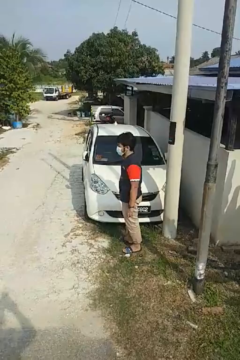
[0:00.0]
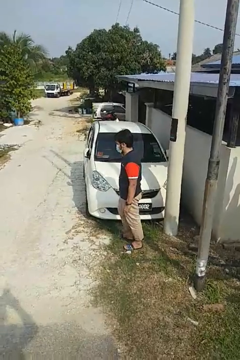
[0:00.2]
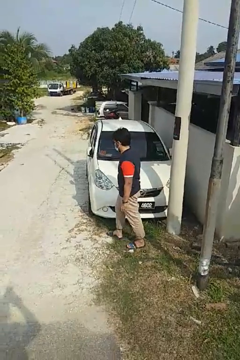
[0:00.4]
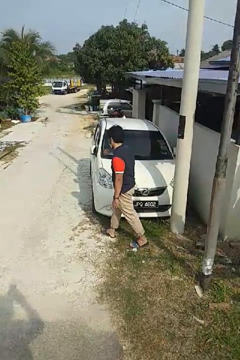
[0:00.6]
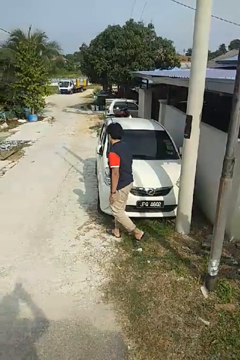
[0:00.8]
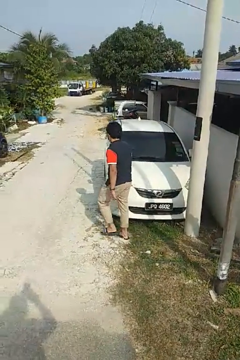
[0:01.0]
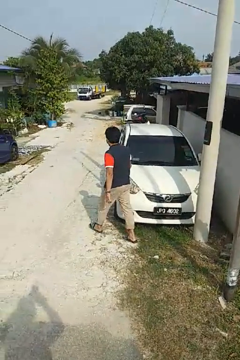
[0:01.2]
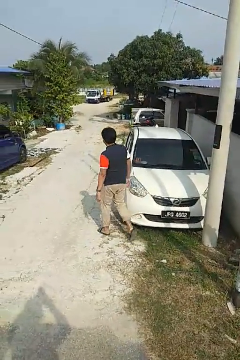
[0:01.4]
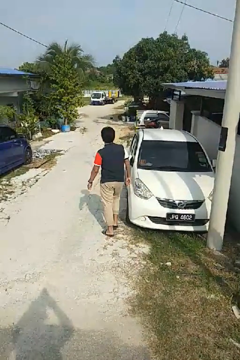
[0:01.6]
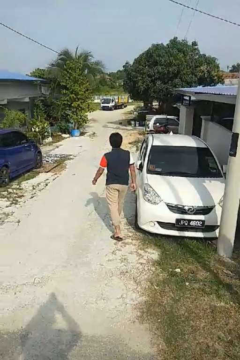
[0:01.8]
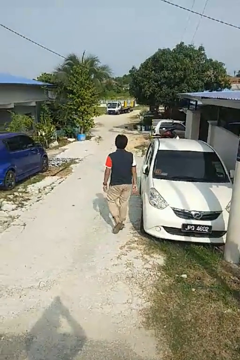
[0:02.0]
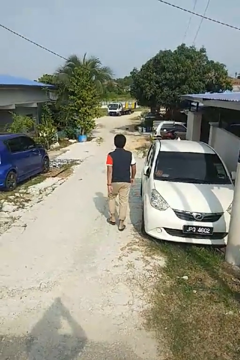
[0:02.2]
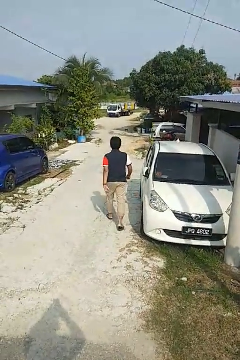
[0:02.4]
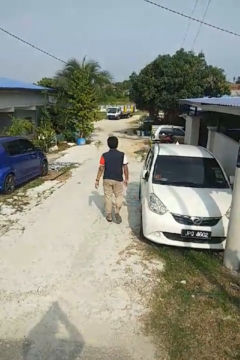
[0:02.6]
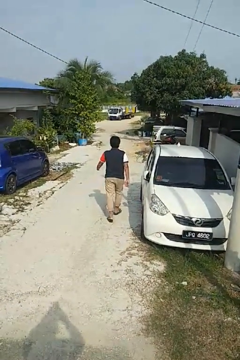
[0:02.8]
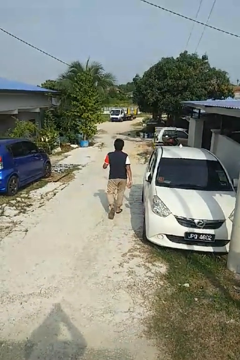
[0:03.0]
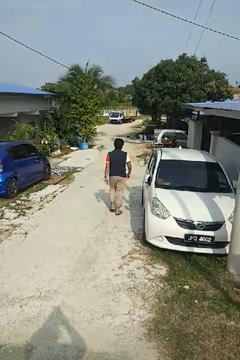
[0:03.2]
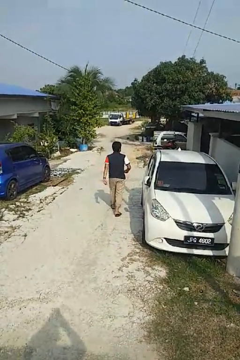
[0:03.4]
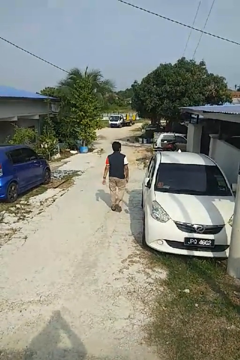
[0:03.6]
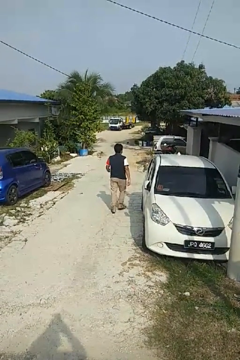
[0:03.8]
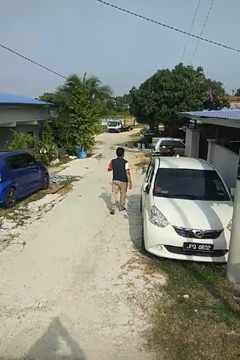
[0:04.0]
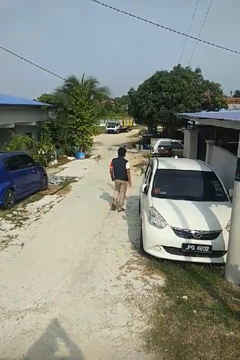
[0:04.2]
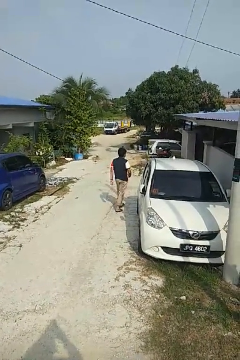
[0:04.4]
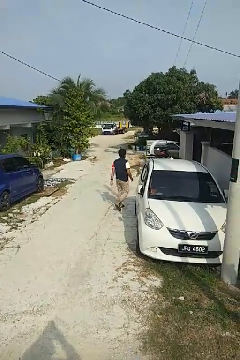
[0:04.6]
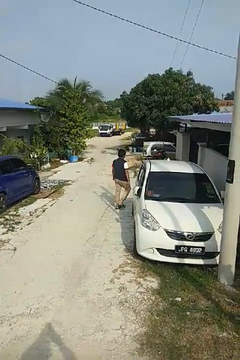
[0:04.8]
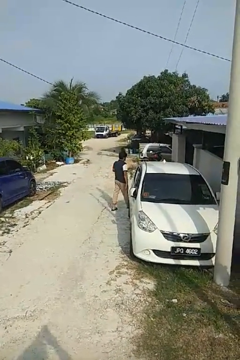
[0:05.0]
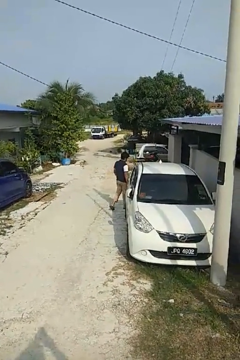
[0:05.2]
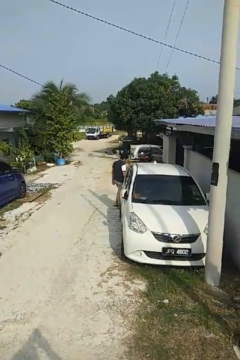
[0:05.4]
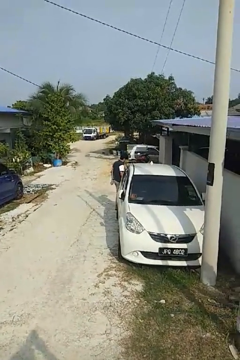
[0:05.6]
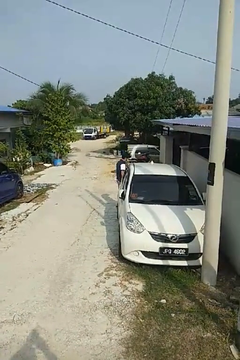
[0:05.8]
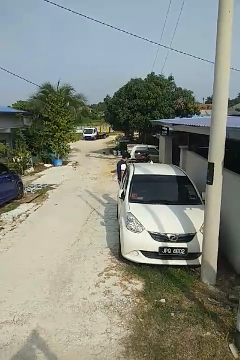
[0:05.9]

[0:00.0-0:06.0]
person walks around car

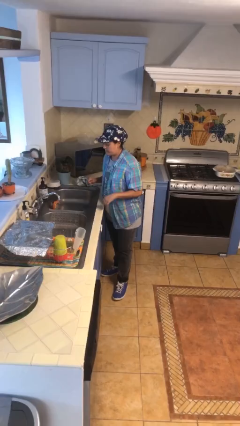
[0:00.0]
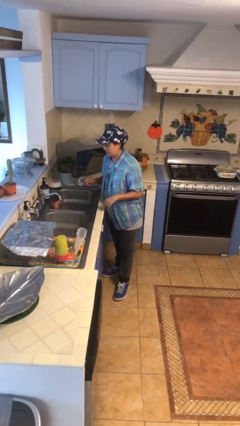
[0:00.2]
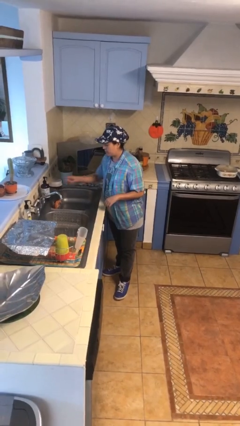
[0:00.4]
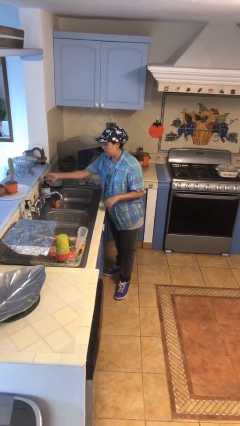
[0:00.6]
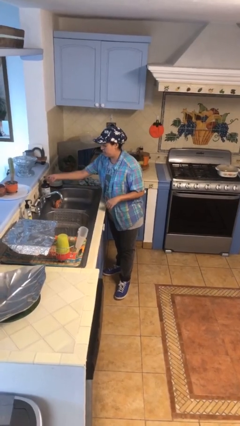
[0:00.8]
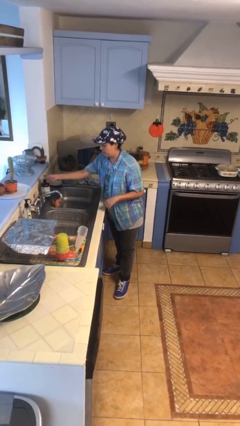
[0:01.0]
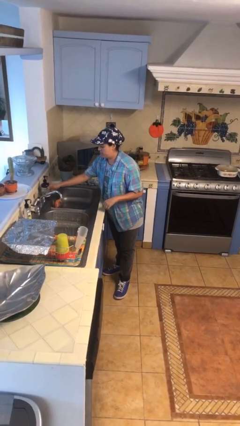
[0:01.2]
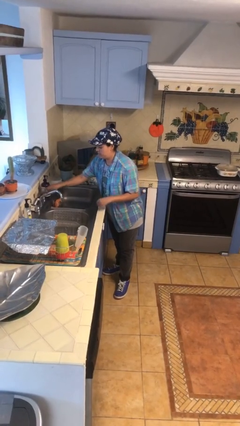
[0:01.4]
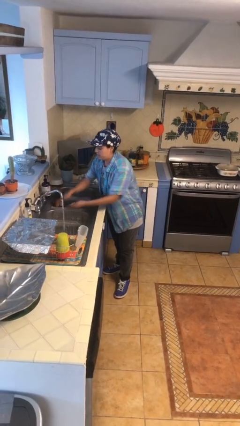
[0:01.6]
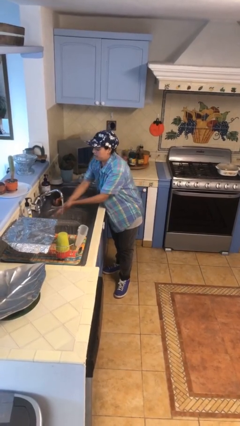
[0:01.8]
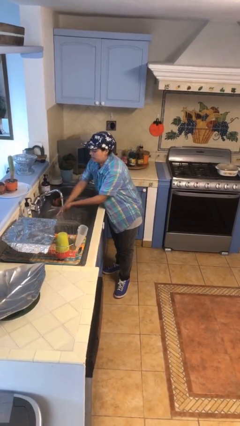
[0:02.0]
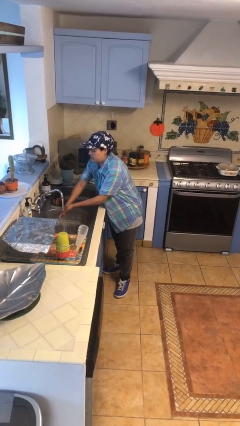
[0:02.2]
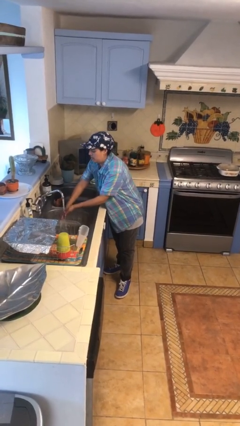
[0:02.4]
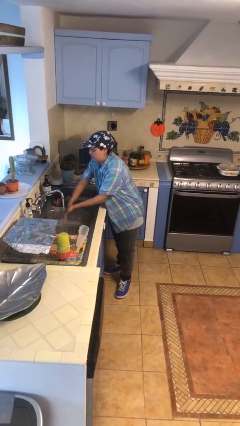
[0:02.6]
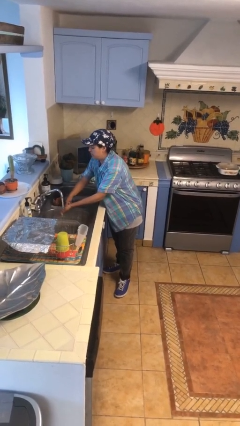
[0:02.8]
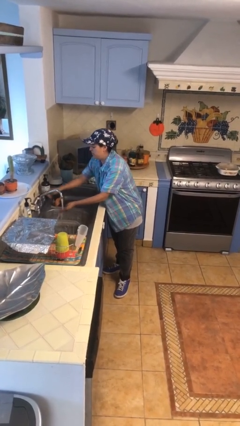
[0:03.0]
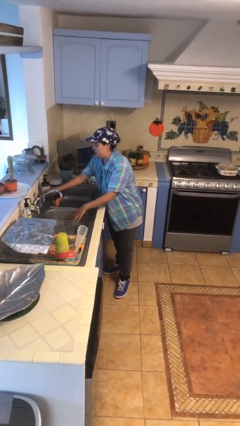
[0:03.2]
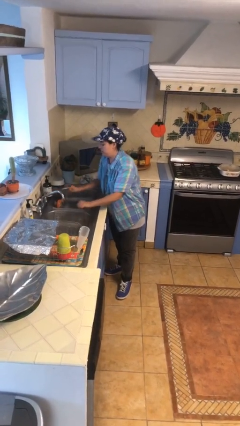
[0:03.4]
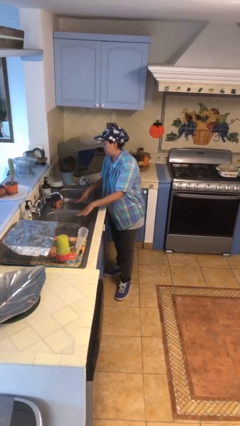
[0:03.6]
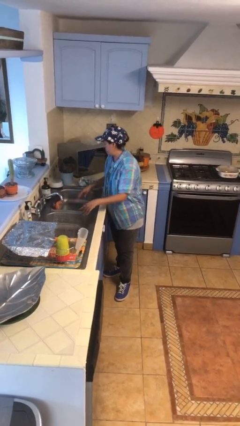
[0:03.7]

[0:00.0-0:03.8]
person washes hands

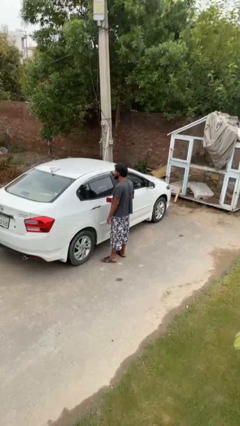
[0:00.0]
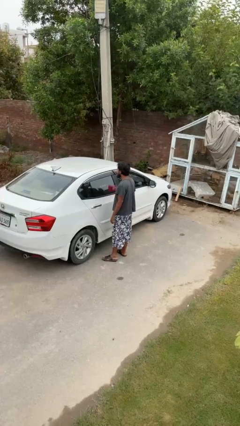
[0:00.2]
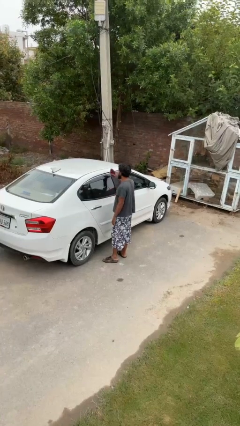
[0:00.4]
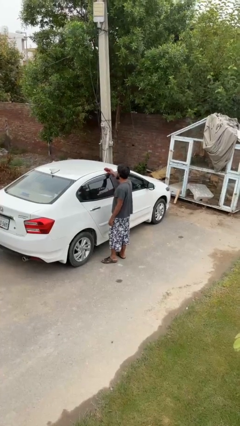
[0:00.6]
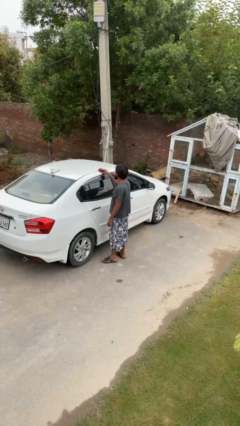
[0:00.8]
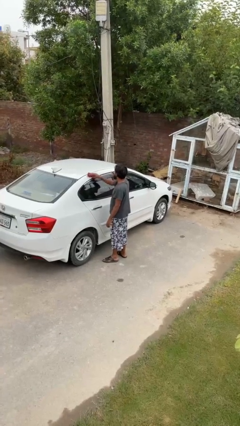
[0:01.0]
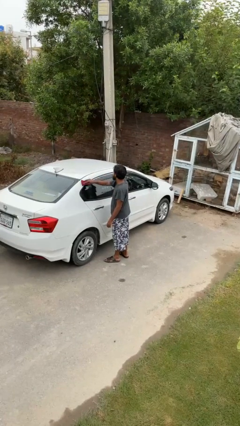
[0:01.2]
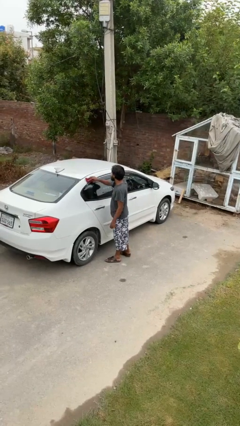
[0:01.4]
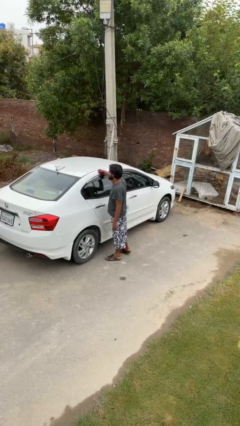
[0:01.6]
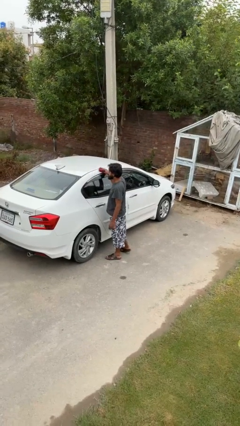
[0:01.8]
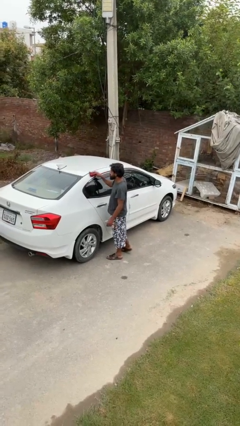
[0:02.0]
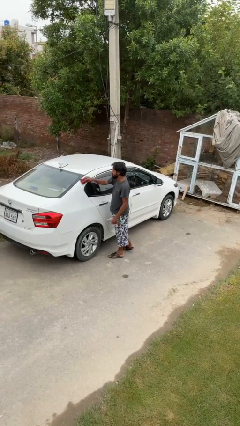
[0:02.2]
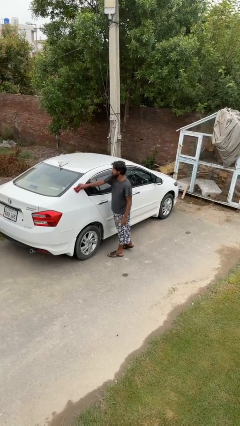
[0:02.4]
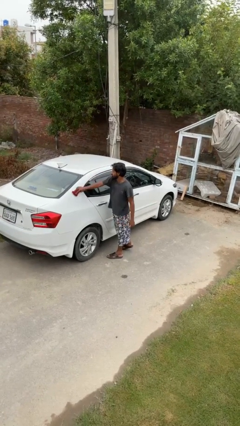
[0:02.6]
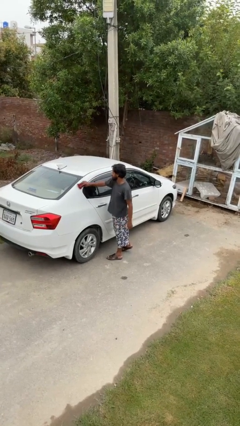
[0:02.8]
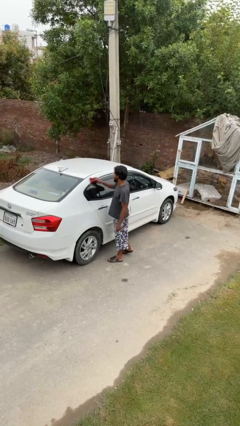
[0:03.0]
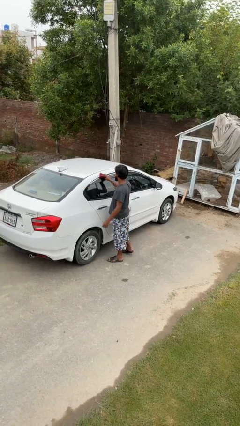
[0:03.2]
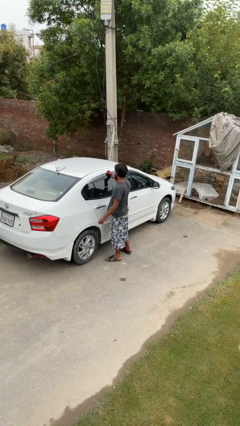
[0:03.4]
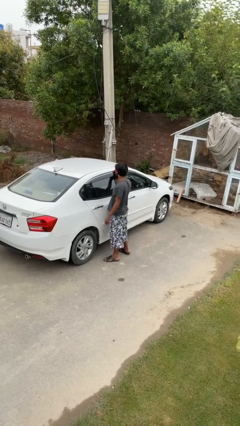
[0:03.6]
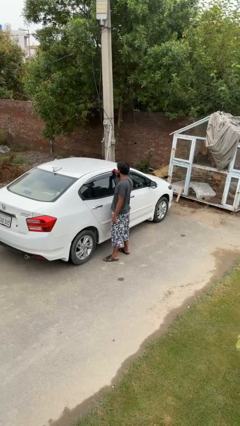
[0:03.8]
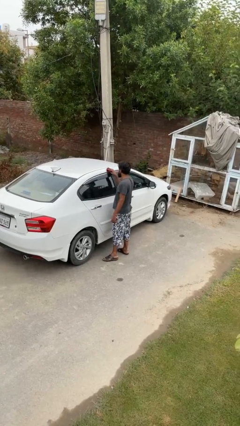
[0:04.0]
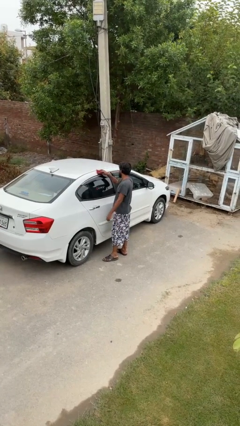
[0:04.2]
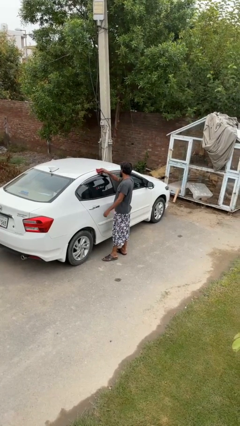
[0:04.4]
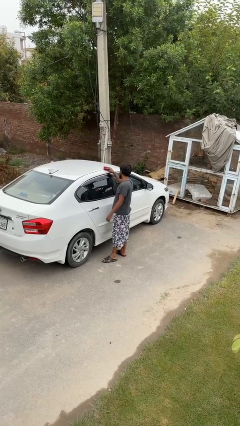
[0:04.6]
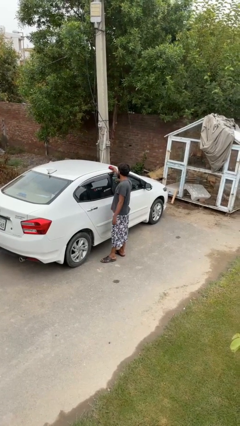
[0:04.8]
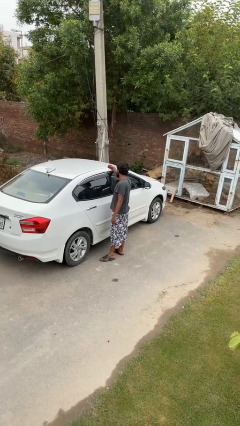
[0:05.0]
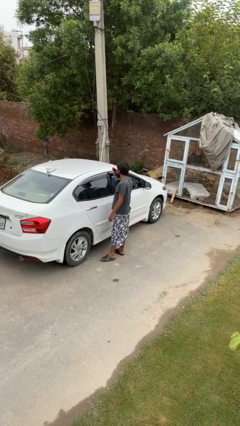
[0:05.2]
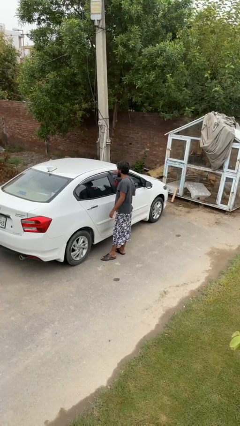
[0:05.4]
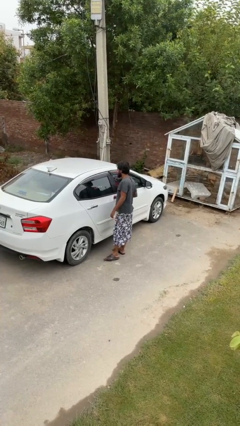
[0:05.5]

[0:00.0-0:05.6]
person polishes car with rag

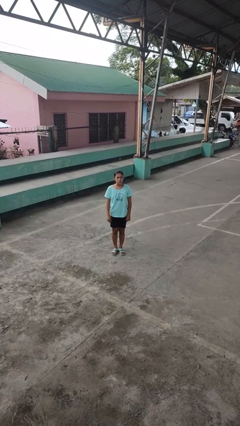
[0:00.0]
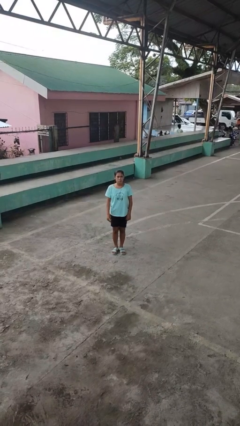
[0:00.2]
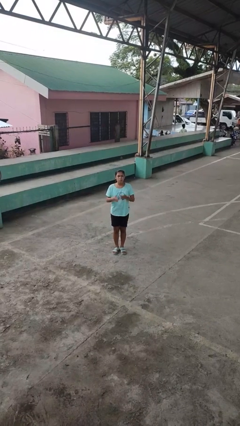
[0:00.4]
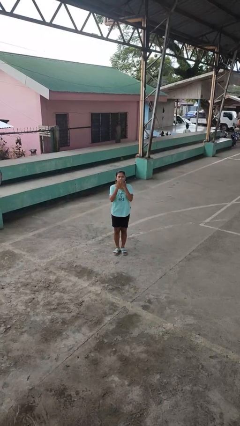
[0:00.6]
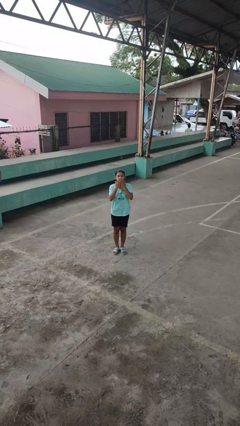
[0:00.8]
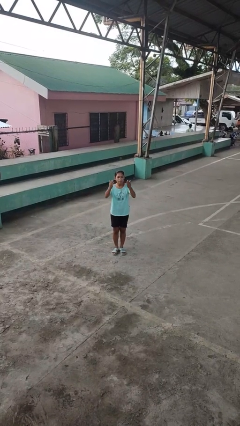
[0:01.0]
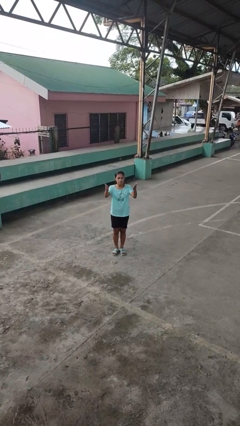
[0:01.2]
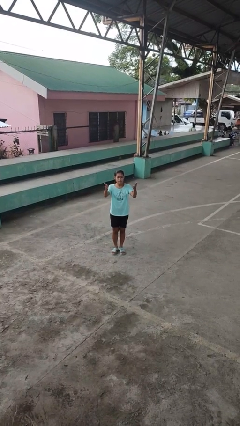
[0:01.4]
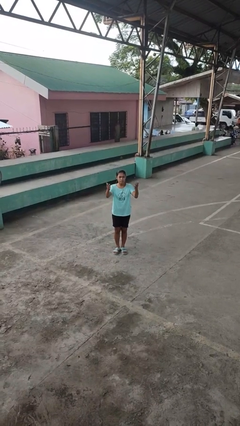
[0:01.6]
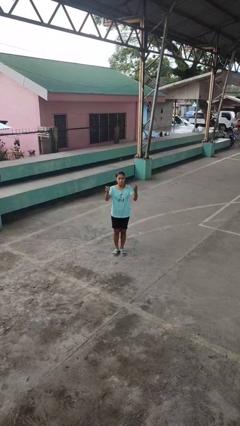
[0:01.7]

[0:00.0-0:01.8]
person gestures blow kiss

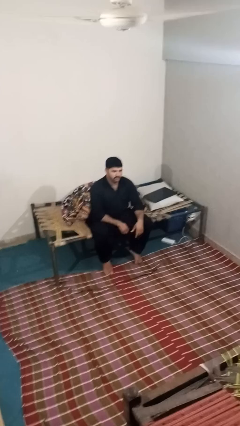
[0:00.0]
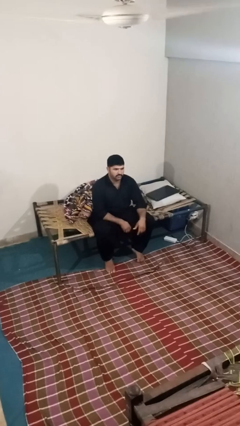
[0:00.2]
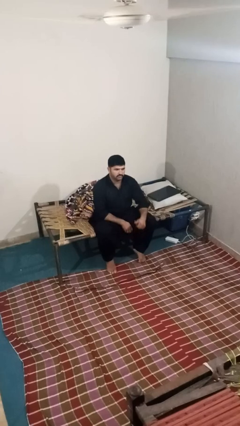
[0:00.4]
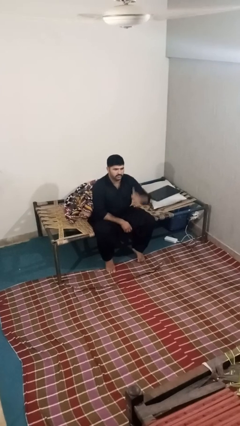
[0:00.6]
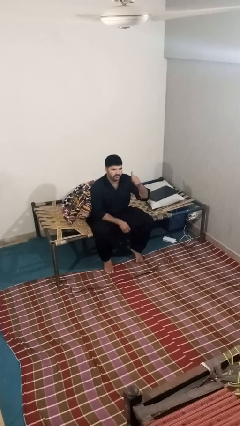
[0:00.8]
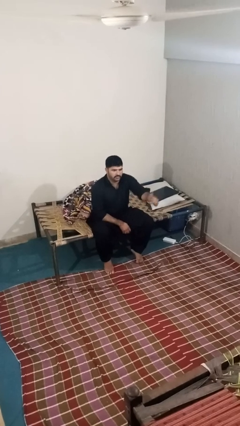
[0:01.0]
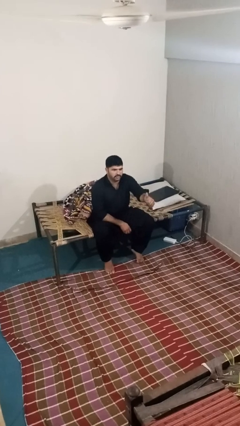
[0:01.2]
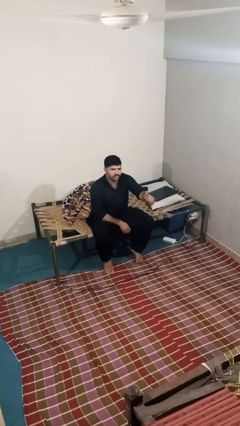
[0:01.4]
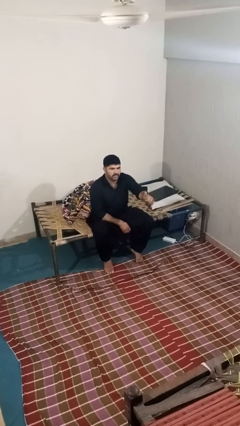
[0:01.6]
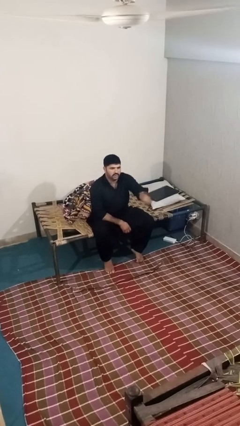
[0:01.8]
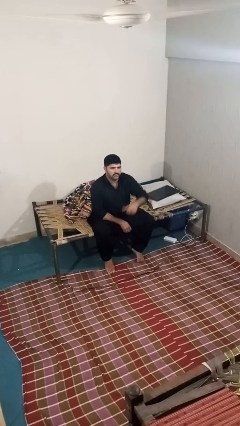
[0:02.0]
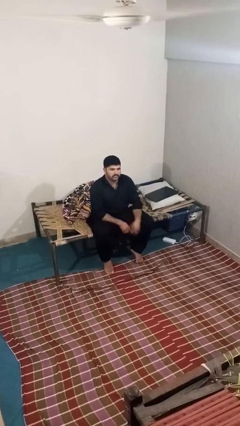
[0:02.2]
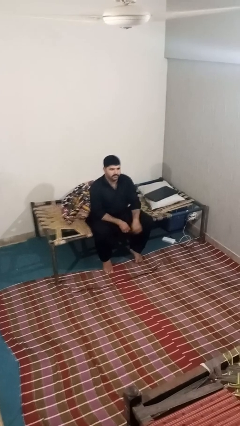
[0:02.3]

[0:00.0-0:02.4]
person gestures thumbs up
